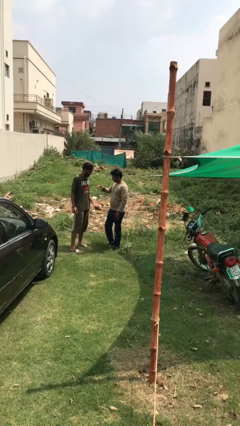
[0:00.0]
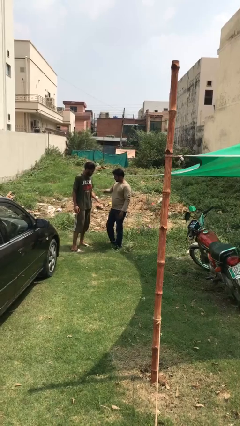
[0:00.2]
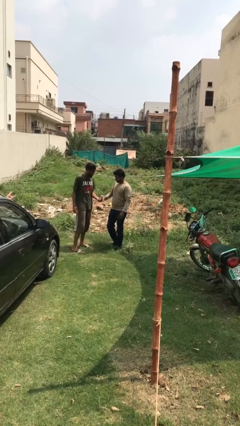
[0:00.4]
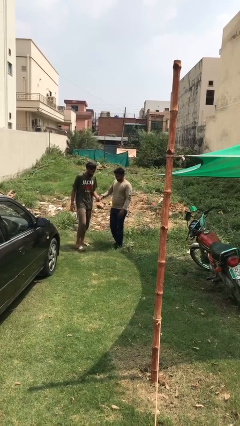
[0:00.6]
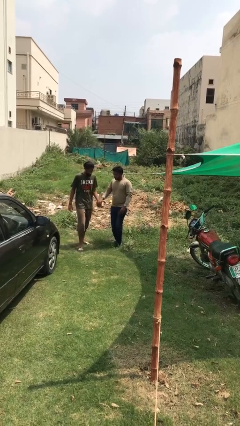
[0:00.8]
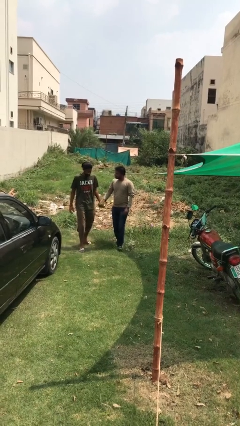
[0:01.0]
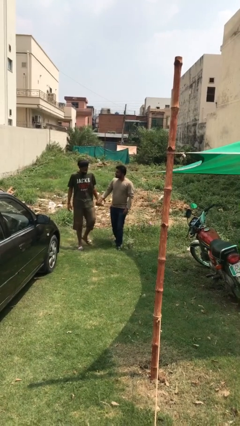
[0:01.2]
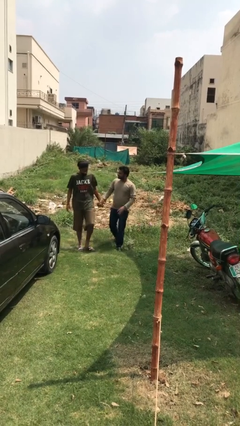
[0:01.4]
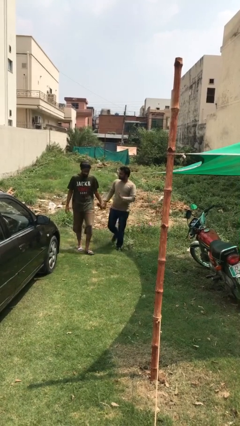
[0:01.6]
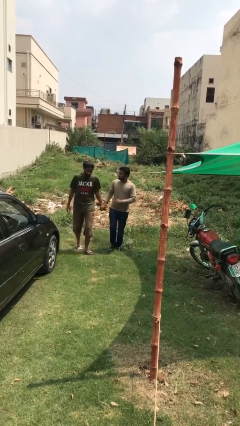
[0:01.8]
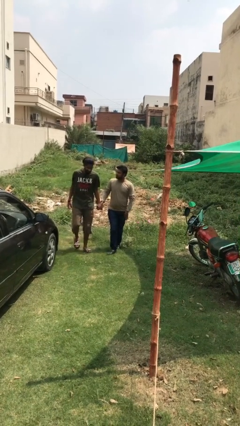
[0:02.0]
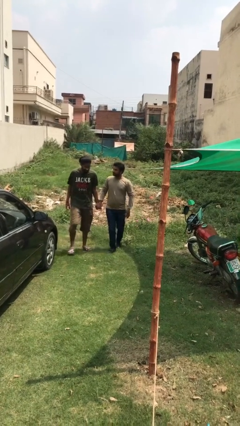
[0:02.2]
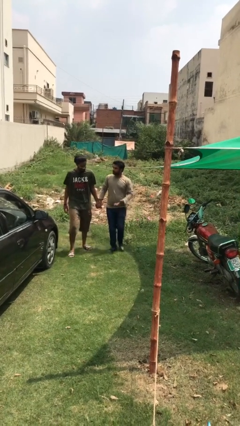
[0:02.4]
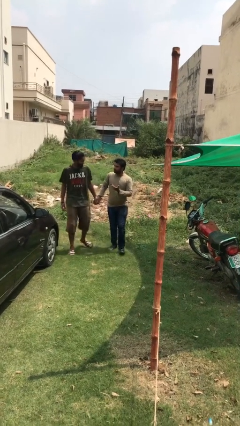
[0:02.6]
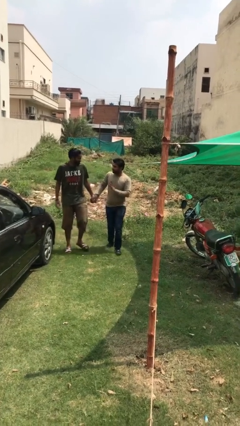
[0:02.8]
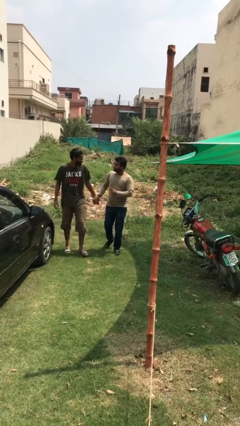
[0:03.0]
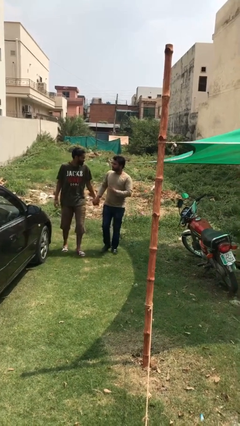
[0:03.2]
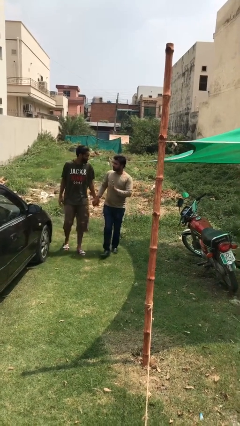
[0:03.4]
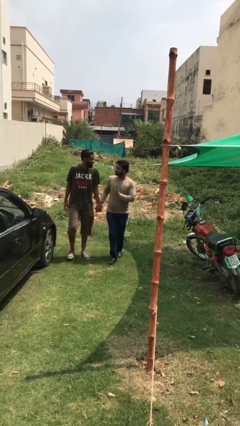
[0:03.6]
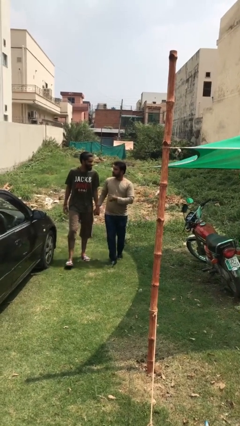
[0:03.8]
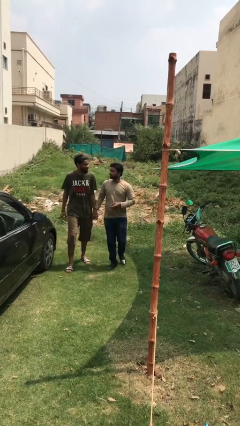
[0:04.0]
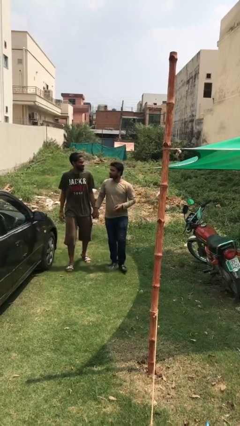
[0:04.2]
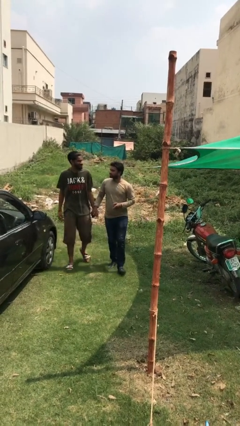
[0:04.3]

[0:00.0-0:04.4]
person holds hand

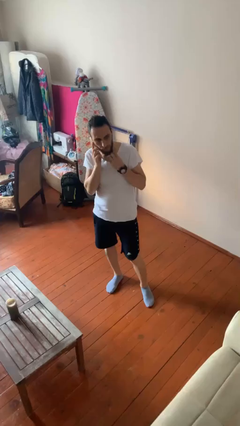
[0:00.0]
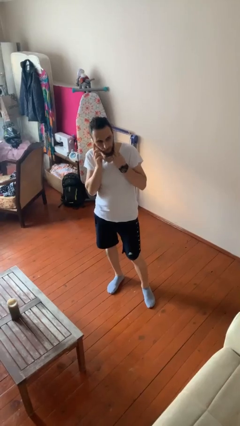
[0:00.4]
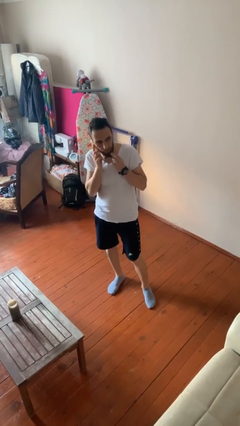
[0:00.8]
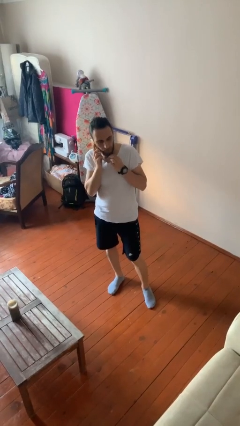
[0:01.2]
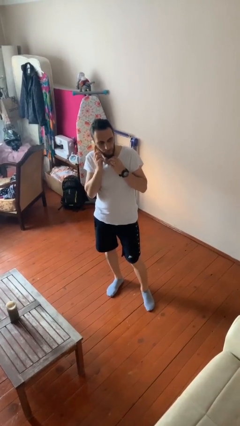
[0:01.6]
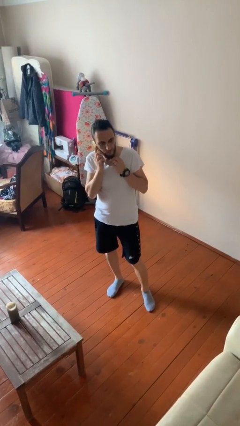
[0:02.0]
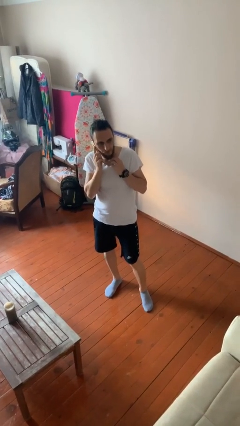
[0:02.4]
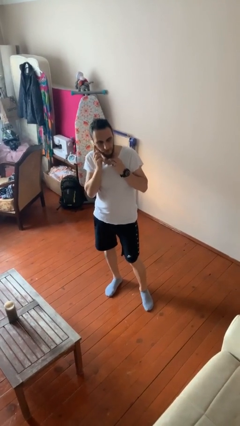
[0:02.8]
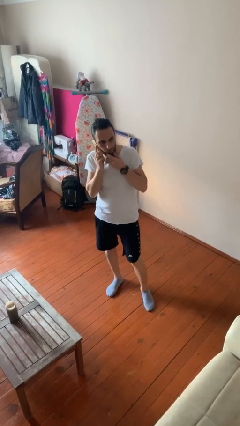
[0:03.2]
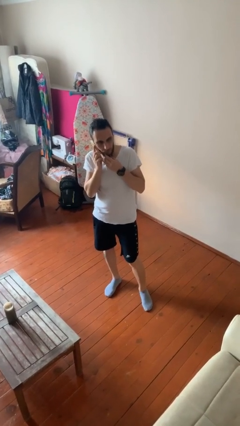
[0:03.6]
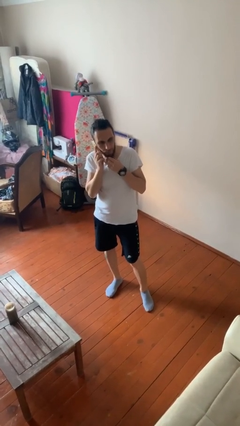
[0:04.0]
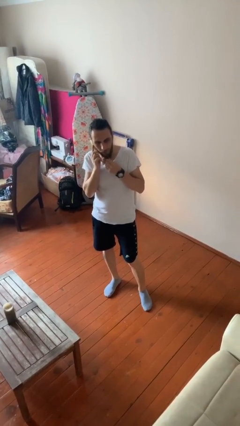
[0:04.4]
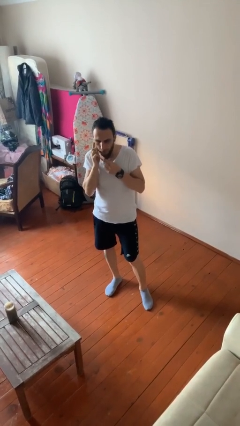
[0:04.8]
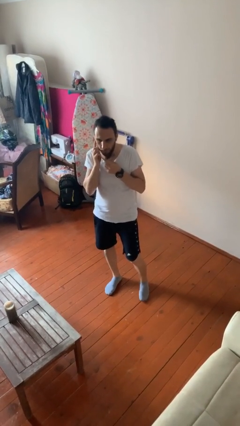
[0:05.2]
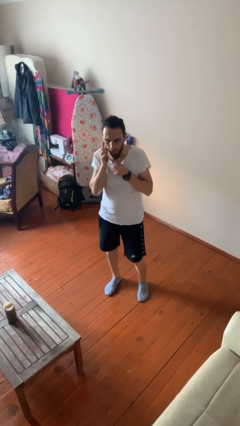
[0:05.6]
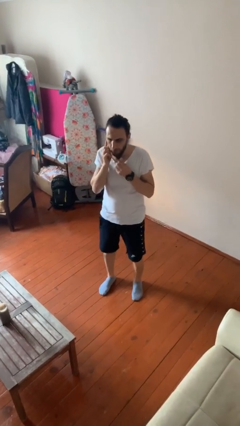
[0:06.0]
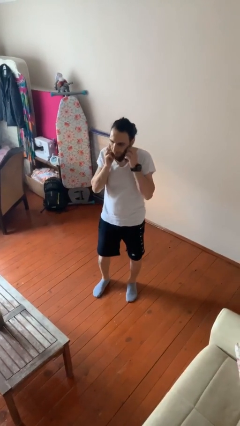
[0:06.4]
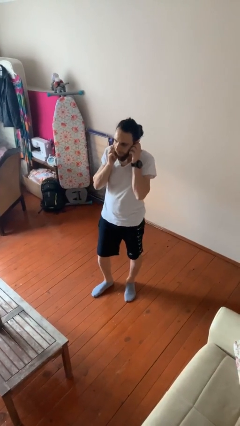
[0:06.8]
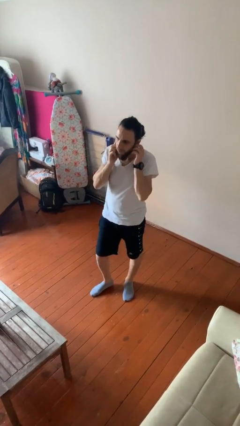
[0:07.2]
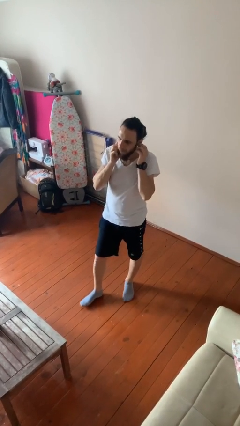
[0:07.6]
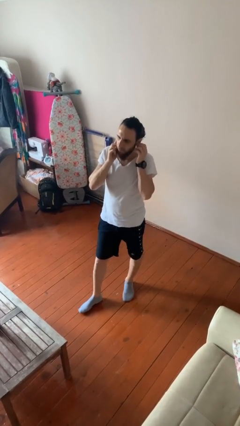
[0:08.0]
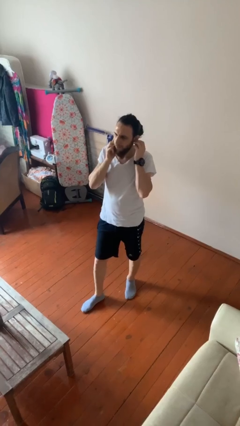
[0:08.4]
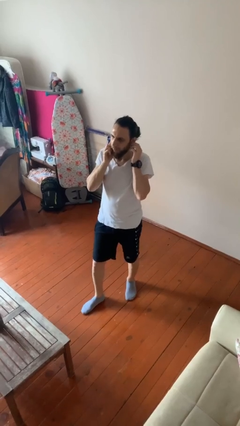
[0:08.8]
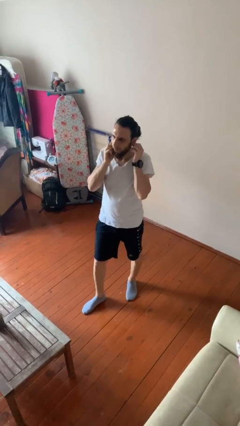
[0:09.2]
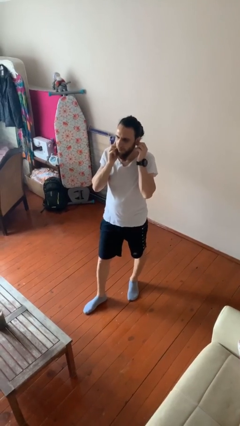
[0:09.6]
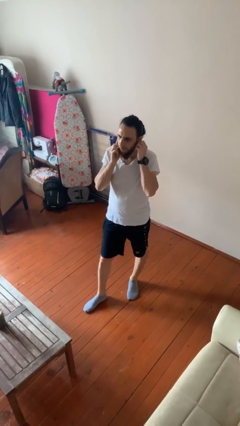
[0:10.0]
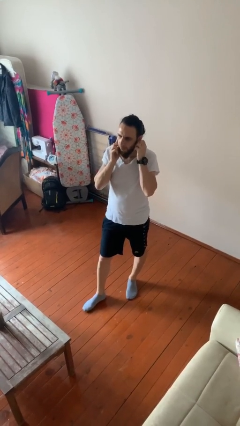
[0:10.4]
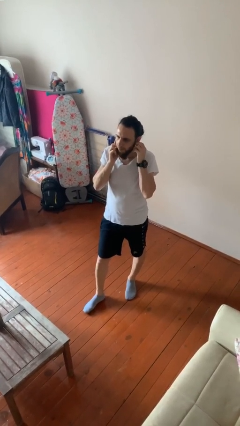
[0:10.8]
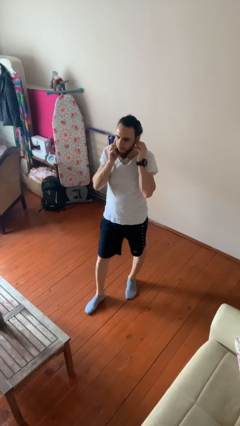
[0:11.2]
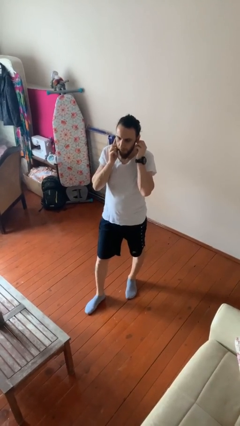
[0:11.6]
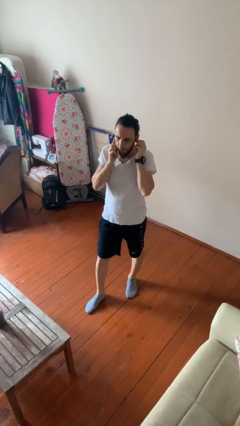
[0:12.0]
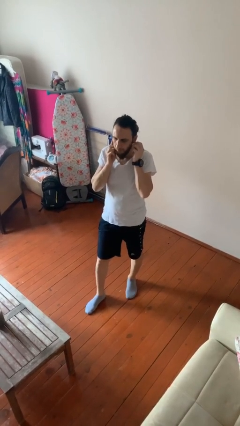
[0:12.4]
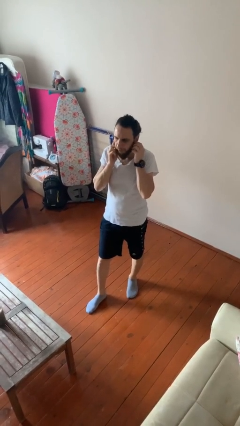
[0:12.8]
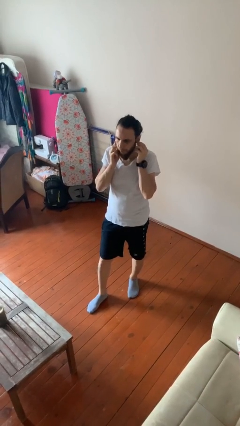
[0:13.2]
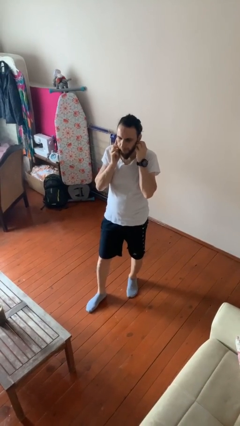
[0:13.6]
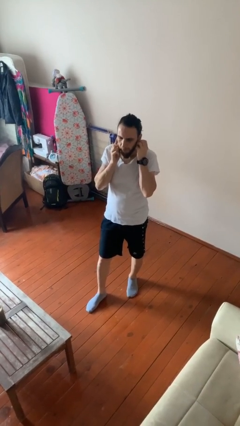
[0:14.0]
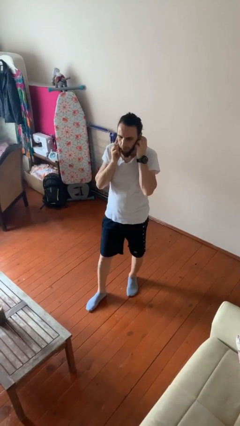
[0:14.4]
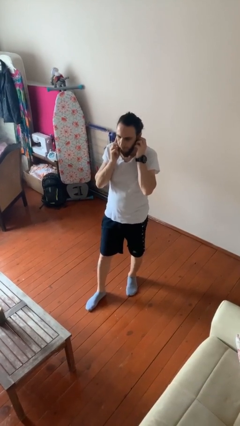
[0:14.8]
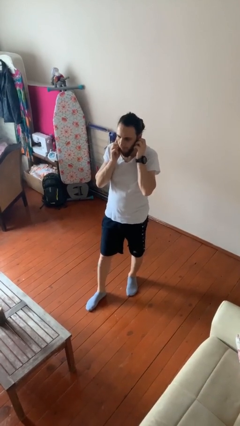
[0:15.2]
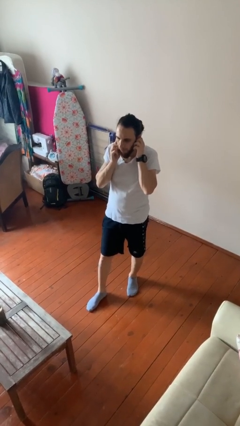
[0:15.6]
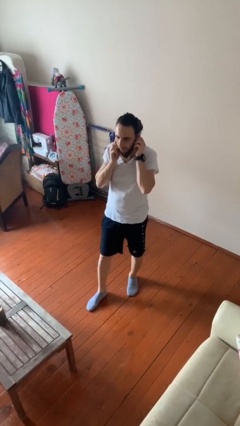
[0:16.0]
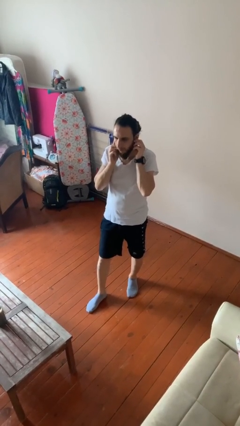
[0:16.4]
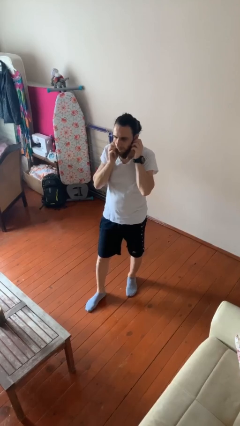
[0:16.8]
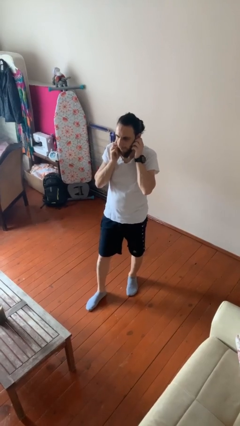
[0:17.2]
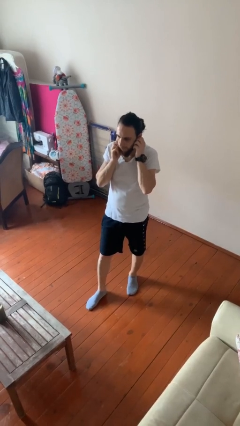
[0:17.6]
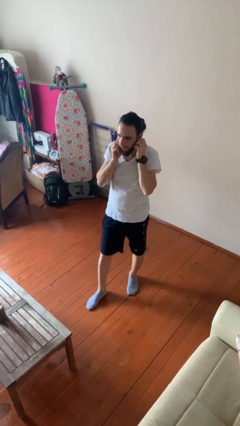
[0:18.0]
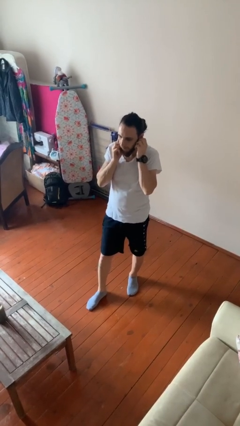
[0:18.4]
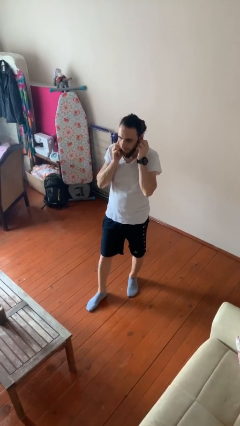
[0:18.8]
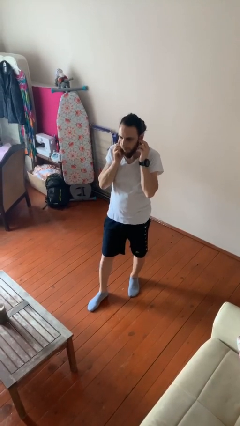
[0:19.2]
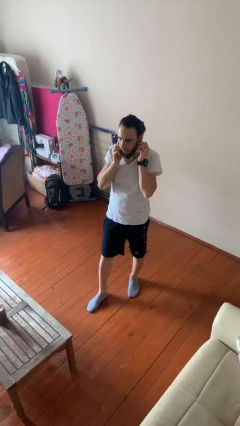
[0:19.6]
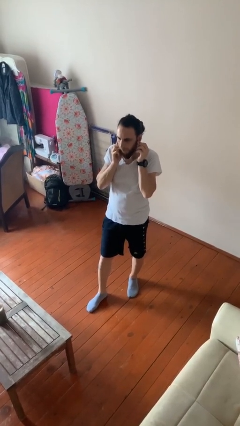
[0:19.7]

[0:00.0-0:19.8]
person talks on phone

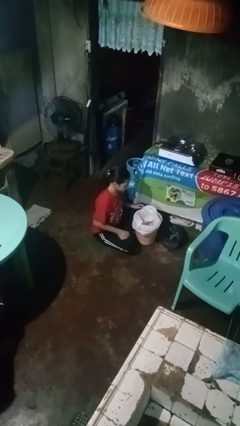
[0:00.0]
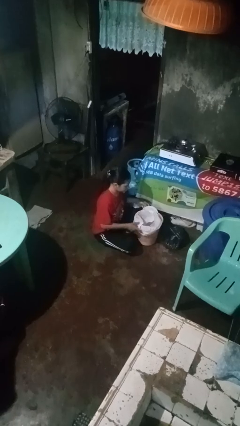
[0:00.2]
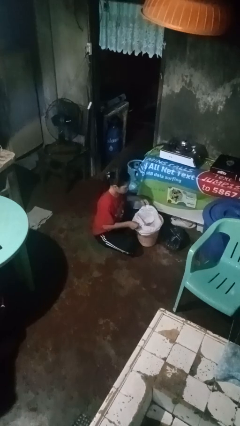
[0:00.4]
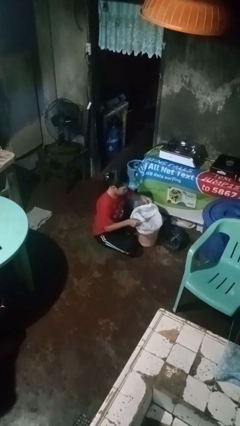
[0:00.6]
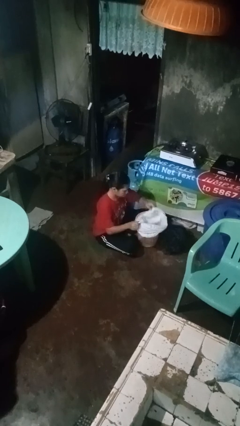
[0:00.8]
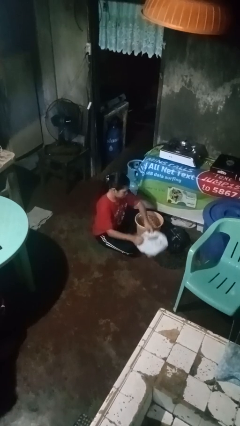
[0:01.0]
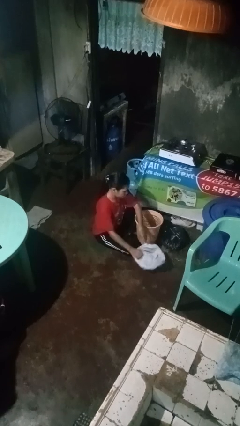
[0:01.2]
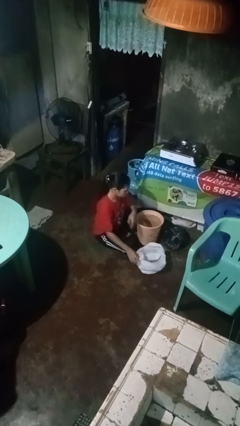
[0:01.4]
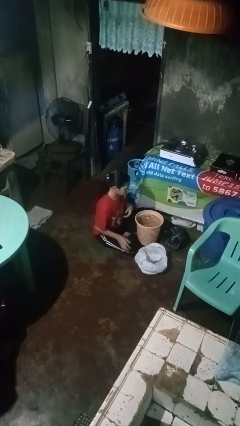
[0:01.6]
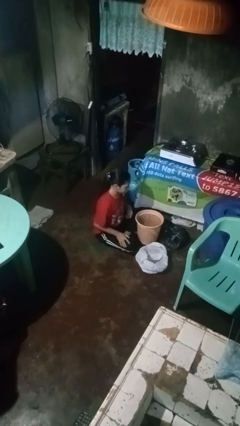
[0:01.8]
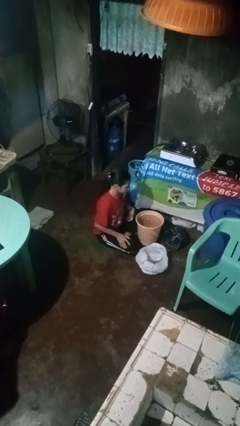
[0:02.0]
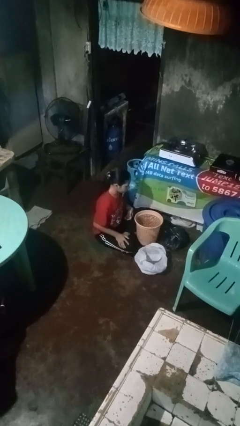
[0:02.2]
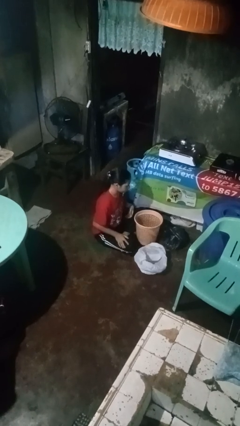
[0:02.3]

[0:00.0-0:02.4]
person removes trashbag from trashcan

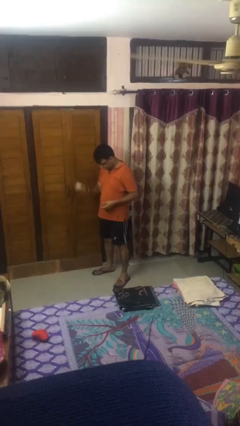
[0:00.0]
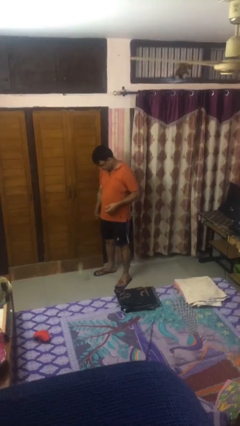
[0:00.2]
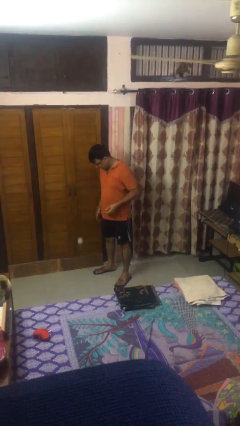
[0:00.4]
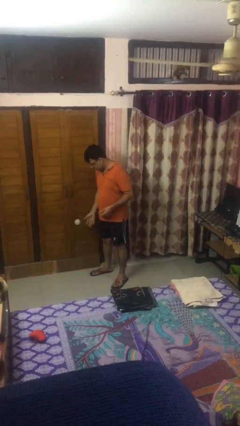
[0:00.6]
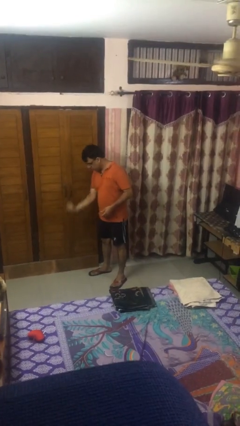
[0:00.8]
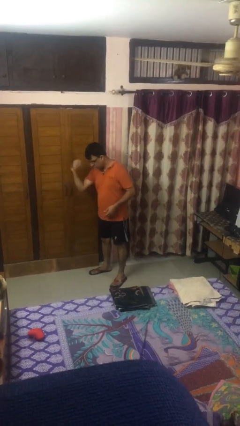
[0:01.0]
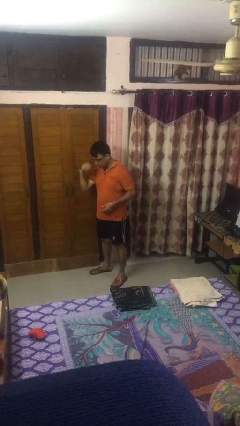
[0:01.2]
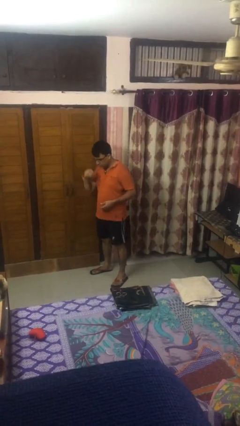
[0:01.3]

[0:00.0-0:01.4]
person bounces ball on floor
